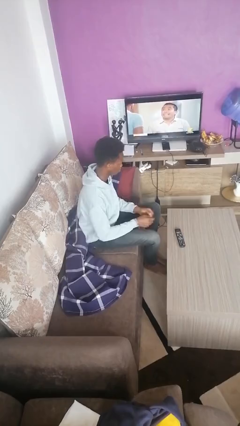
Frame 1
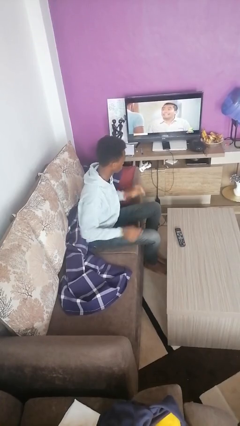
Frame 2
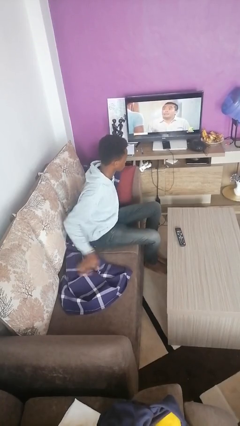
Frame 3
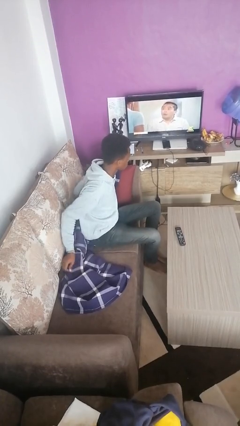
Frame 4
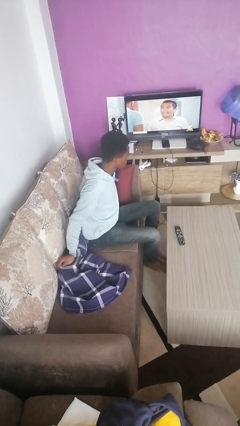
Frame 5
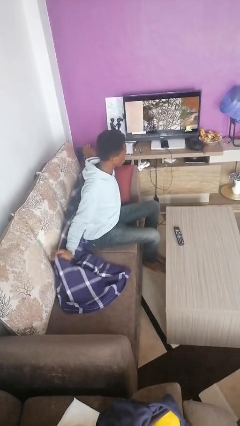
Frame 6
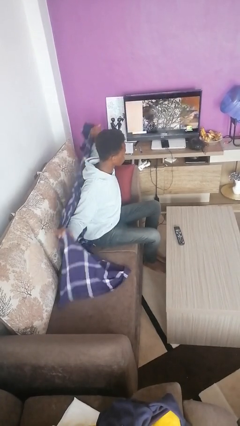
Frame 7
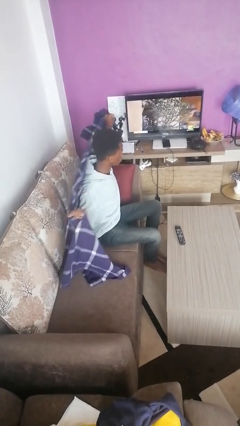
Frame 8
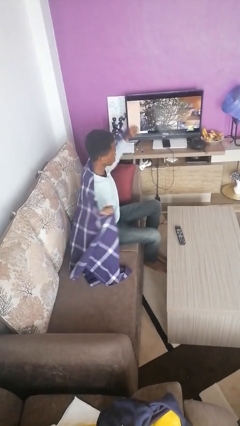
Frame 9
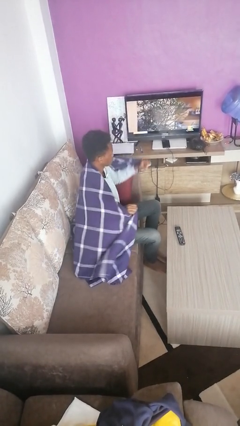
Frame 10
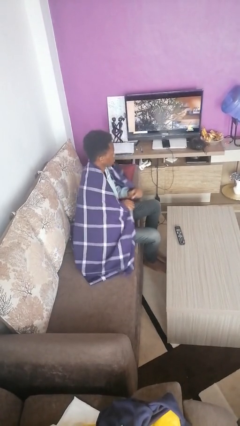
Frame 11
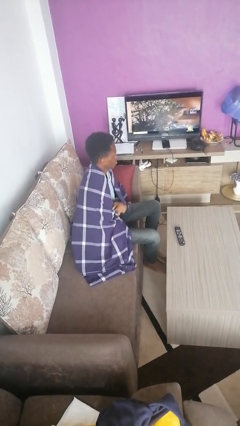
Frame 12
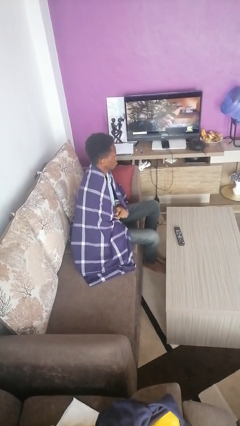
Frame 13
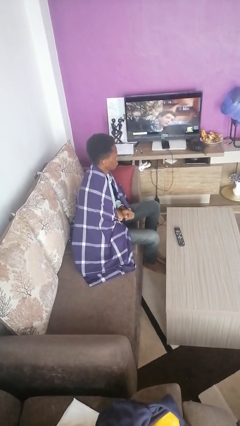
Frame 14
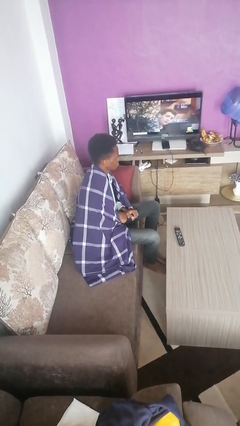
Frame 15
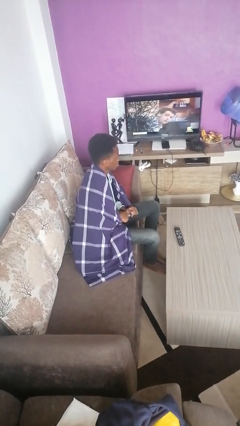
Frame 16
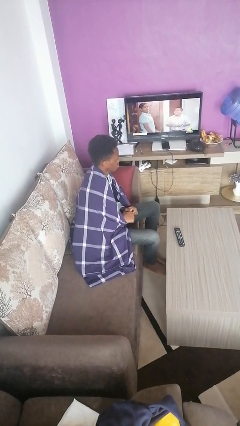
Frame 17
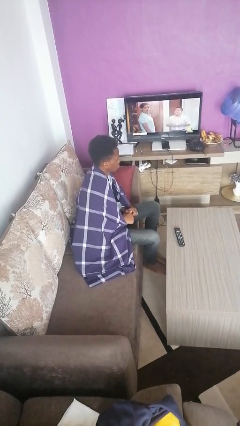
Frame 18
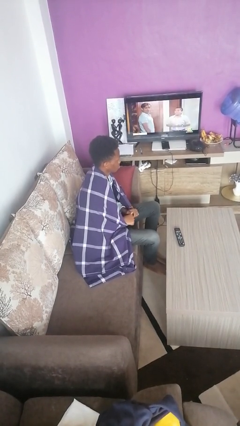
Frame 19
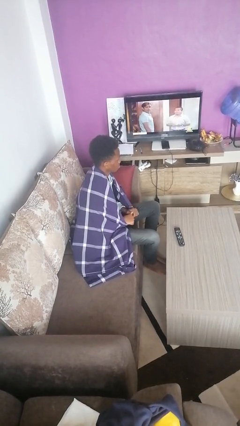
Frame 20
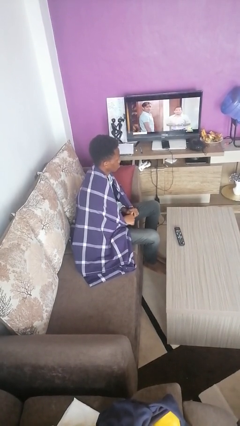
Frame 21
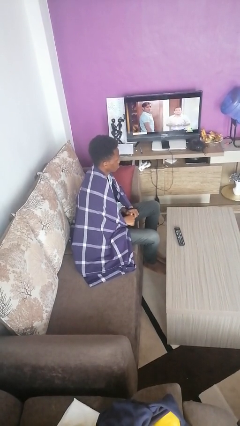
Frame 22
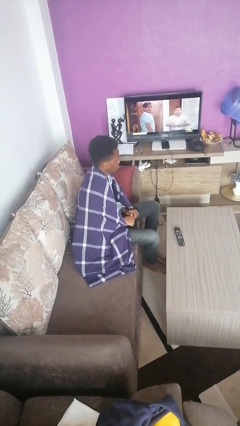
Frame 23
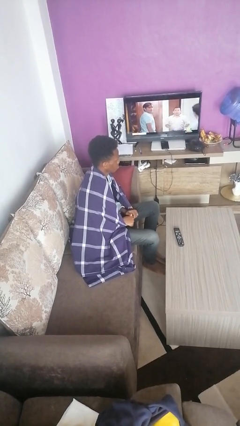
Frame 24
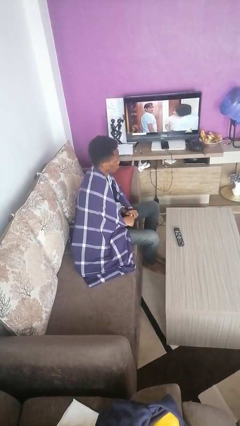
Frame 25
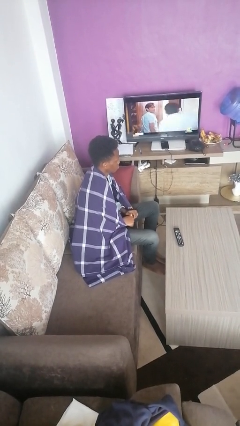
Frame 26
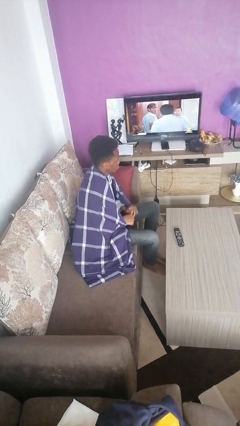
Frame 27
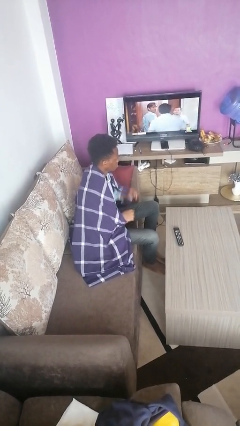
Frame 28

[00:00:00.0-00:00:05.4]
person covers with blanket

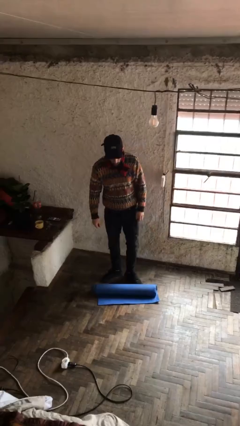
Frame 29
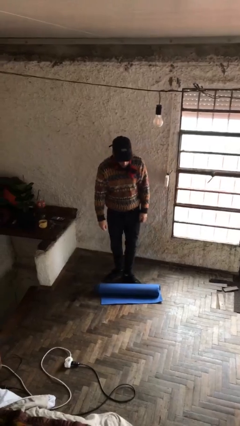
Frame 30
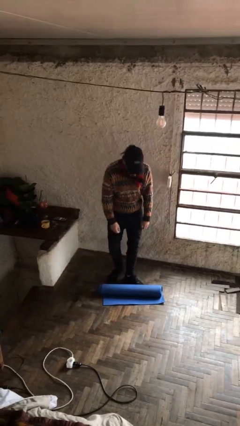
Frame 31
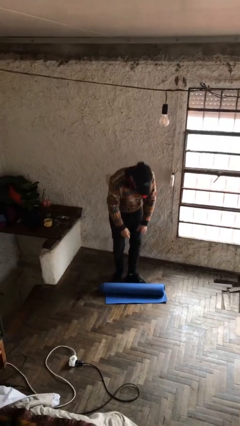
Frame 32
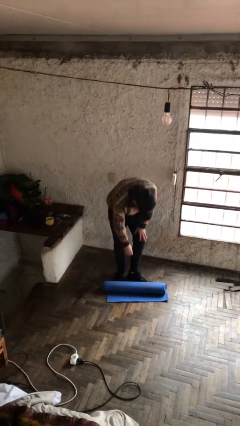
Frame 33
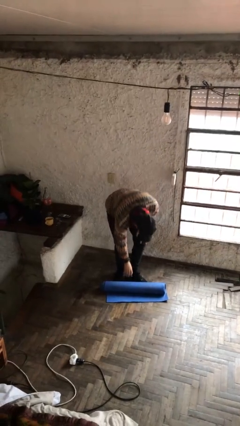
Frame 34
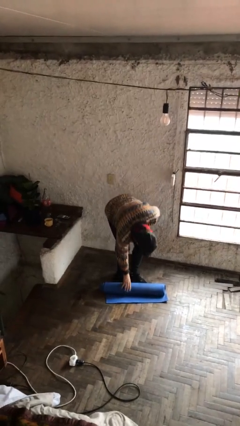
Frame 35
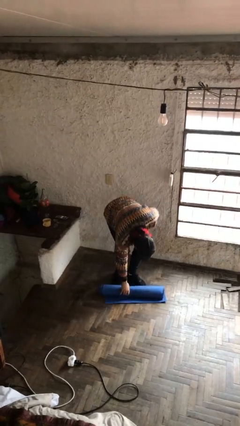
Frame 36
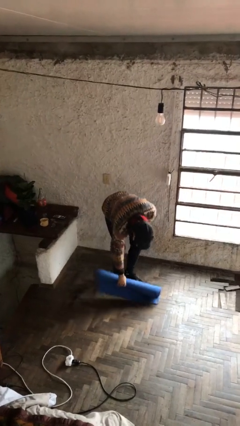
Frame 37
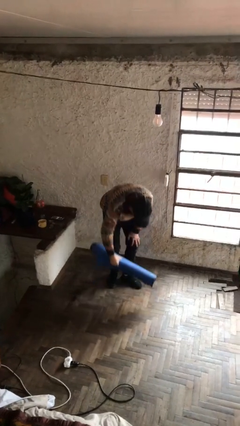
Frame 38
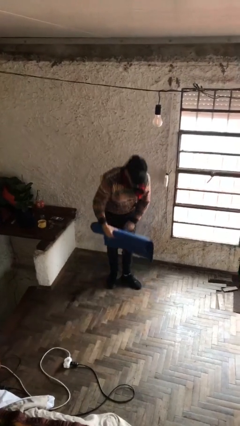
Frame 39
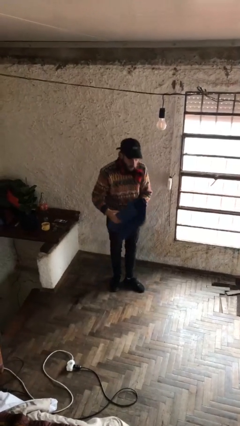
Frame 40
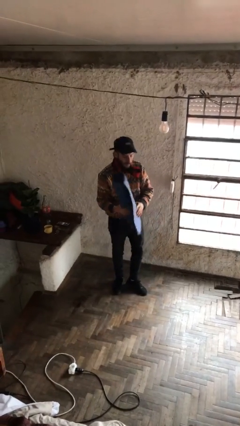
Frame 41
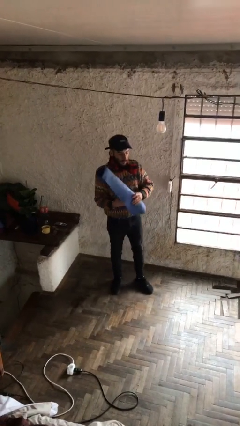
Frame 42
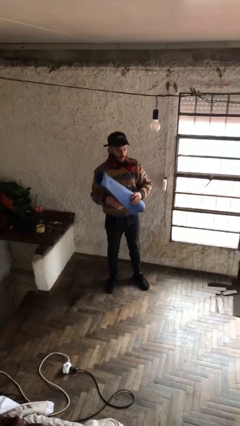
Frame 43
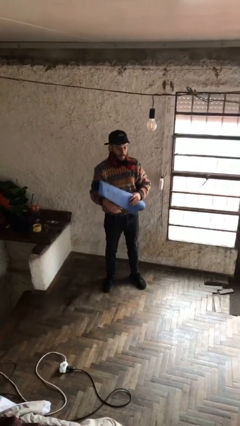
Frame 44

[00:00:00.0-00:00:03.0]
person picks up object from floor

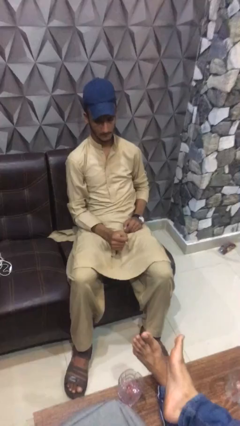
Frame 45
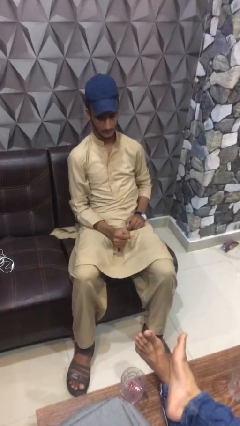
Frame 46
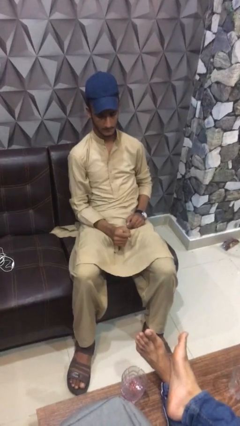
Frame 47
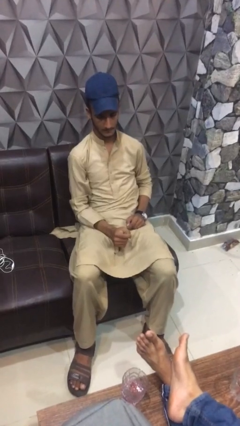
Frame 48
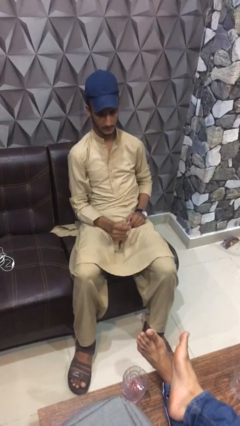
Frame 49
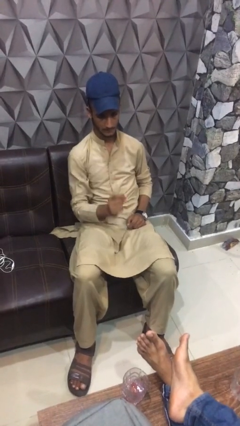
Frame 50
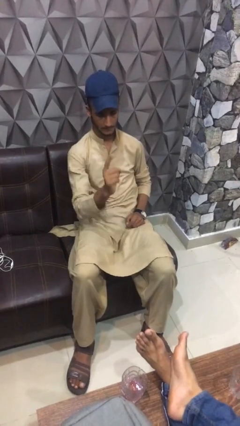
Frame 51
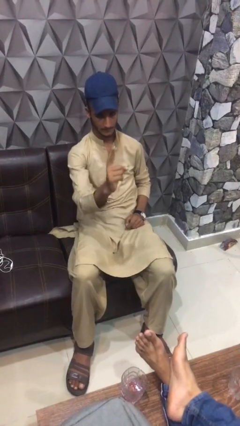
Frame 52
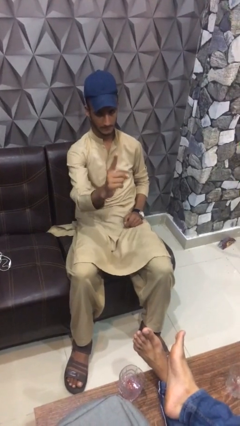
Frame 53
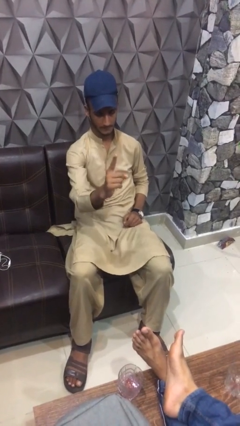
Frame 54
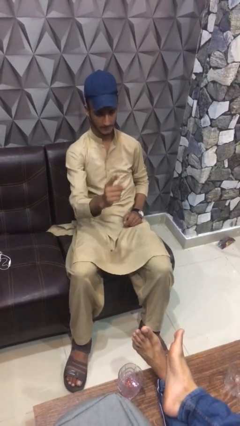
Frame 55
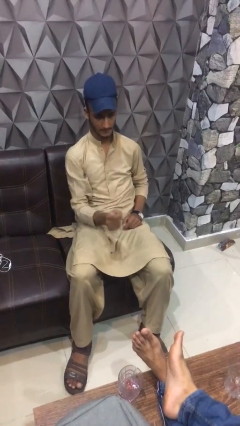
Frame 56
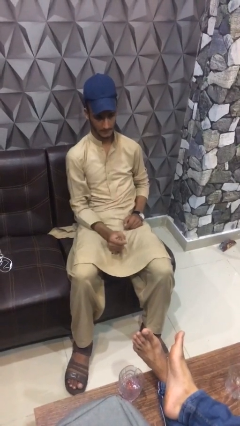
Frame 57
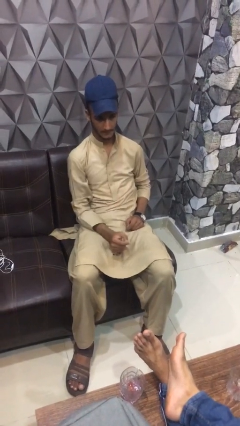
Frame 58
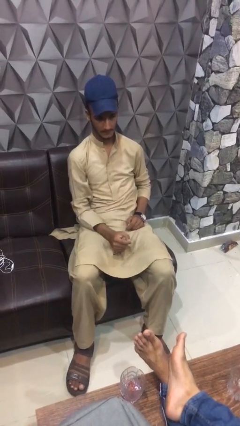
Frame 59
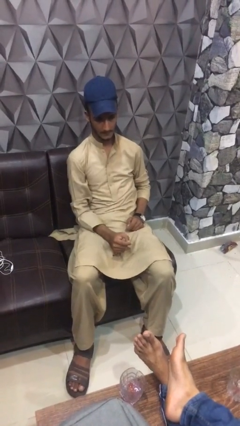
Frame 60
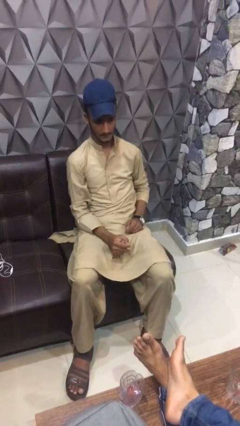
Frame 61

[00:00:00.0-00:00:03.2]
person gestures number one

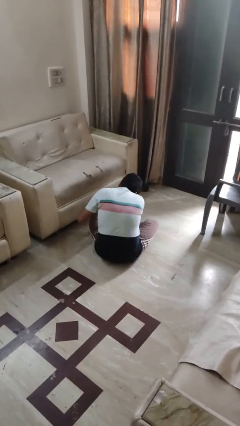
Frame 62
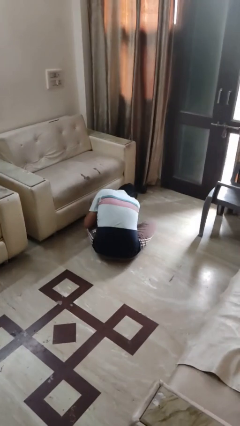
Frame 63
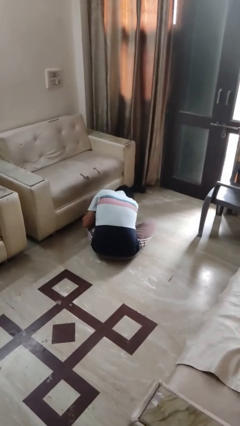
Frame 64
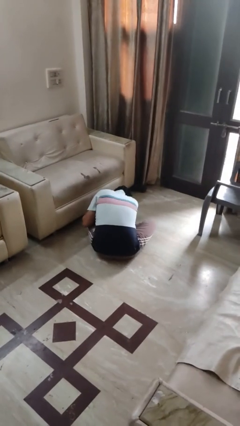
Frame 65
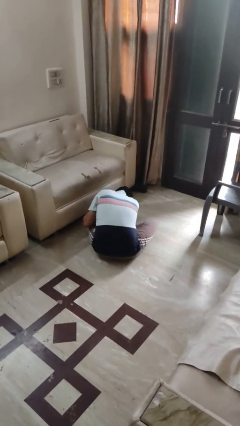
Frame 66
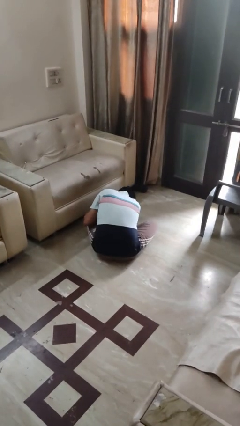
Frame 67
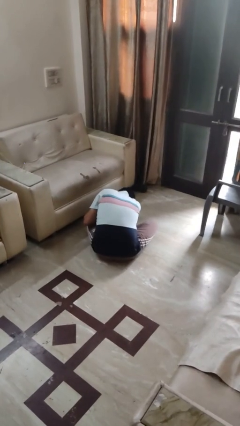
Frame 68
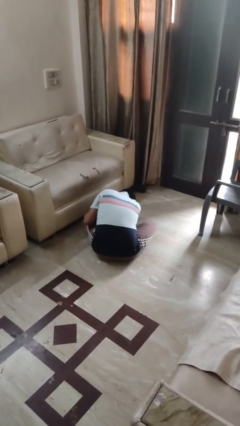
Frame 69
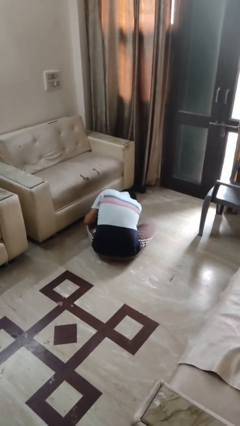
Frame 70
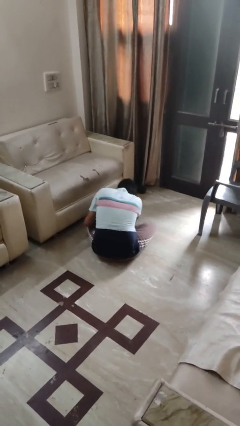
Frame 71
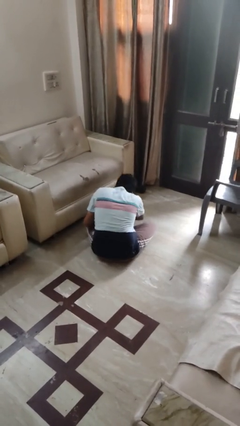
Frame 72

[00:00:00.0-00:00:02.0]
person searches under couch

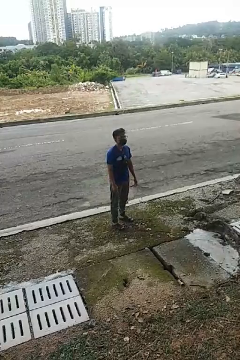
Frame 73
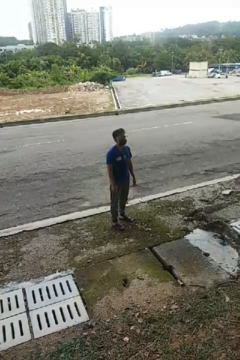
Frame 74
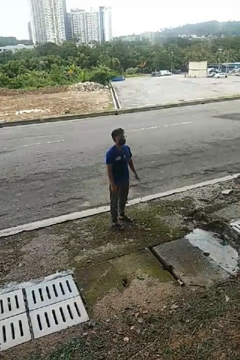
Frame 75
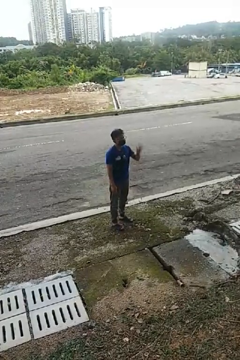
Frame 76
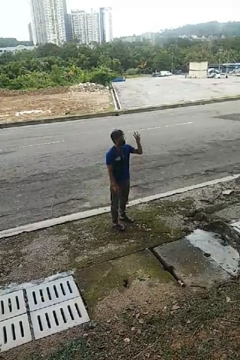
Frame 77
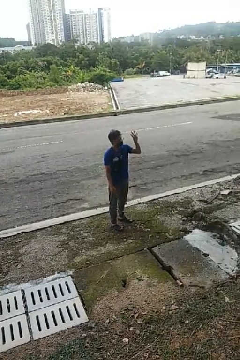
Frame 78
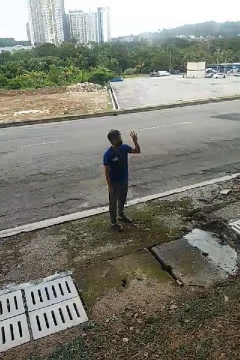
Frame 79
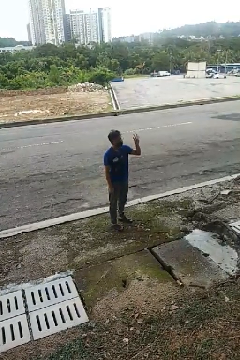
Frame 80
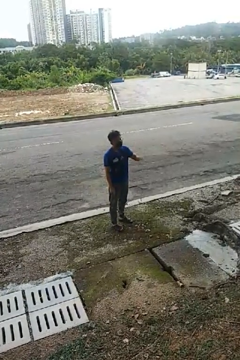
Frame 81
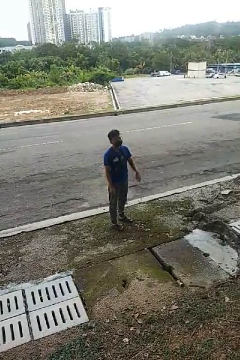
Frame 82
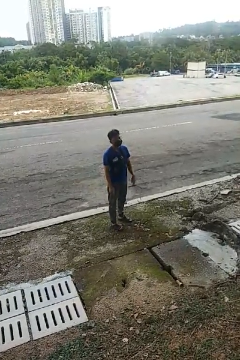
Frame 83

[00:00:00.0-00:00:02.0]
person gestures number four

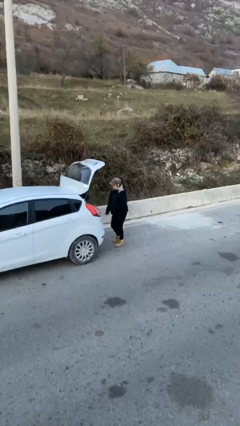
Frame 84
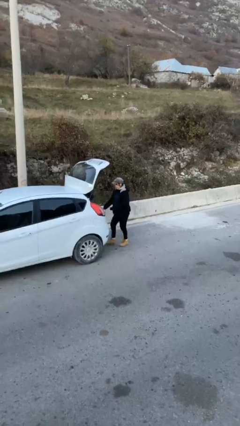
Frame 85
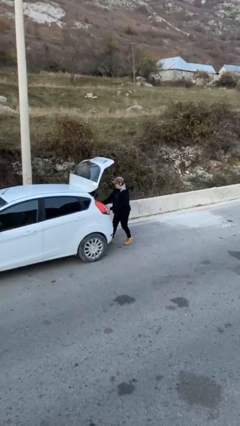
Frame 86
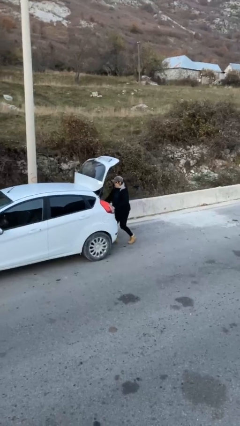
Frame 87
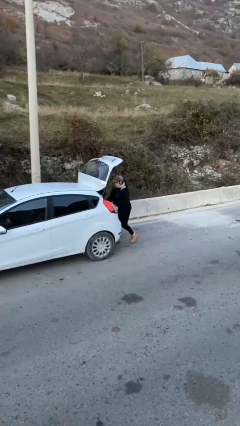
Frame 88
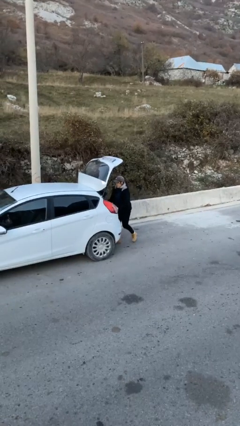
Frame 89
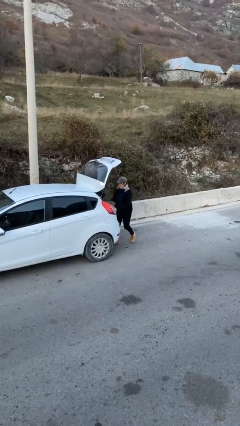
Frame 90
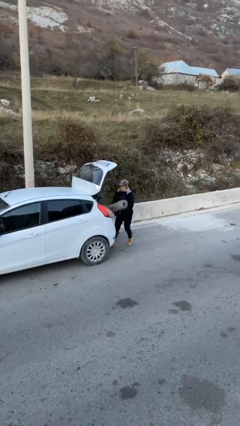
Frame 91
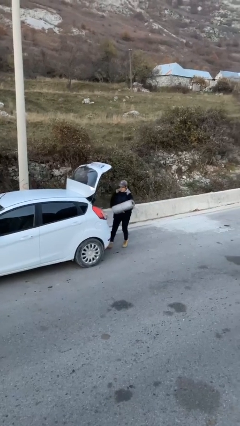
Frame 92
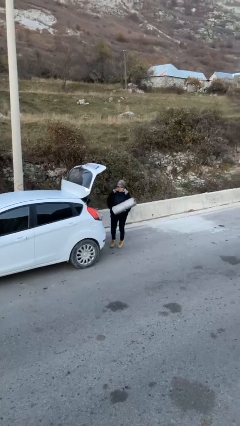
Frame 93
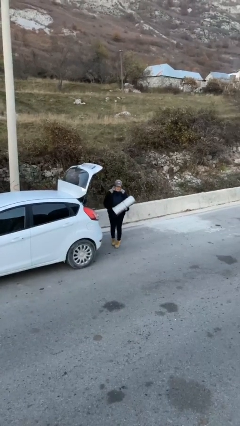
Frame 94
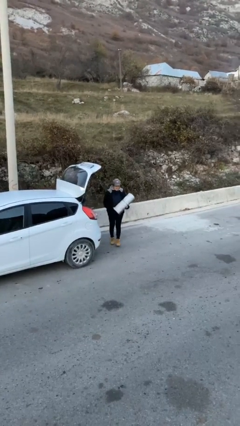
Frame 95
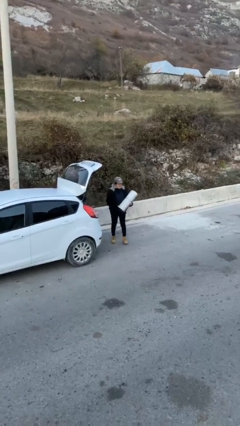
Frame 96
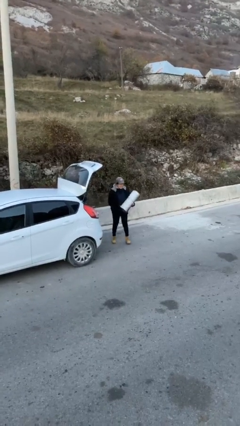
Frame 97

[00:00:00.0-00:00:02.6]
person unloads car

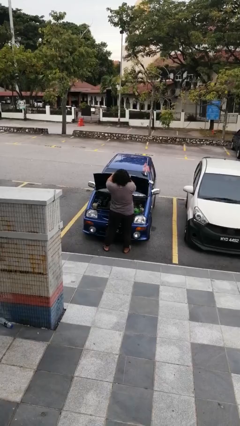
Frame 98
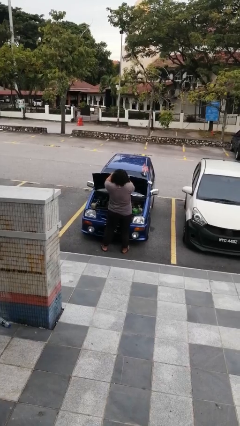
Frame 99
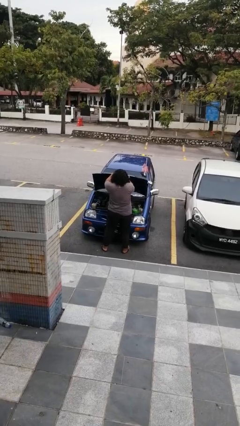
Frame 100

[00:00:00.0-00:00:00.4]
person closes car hood
